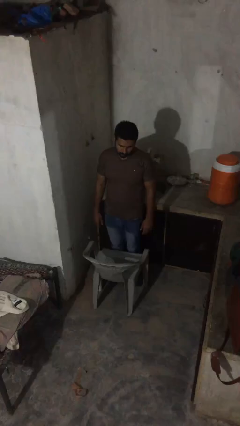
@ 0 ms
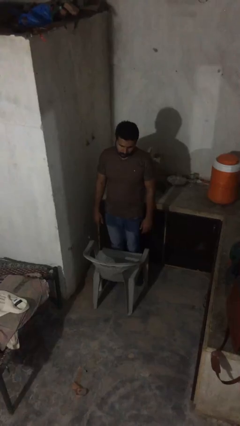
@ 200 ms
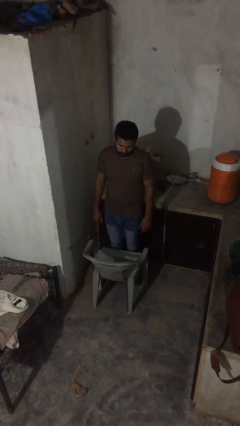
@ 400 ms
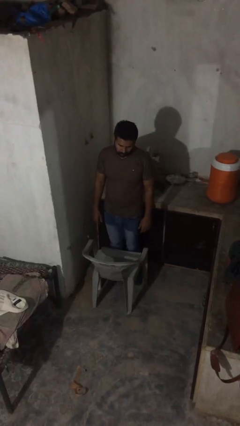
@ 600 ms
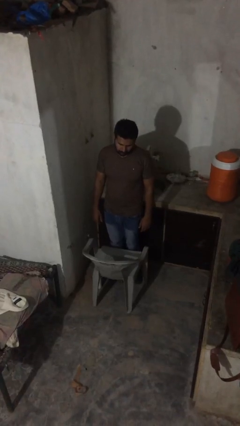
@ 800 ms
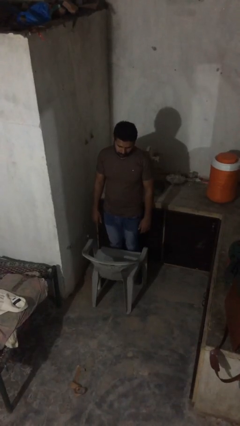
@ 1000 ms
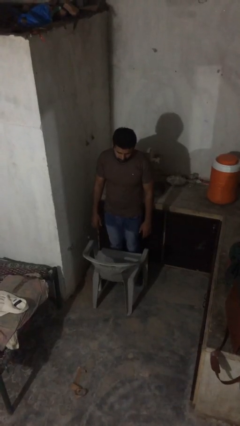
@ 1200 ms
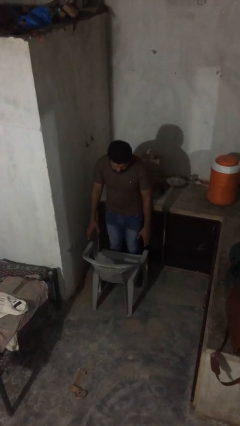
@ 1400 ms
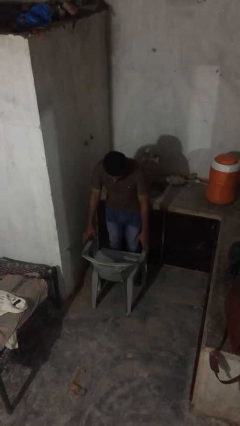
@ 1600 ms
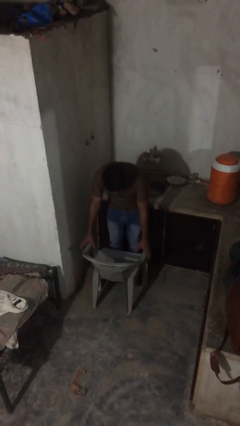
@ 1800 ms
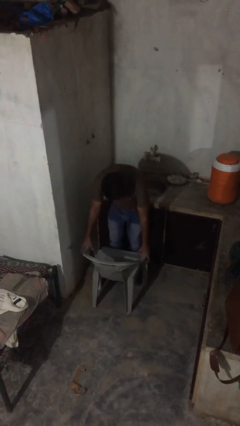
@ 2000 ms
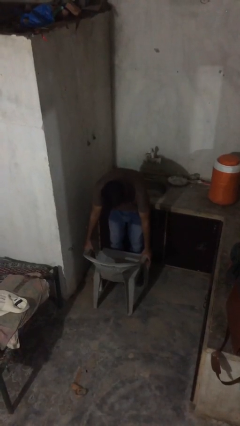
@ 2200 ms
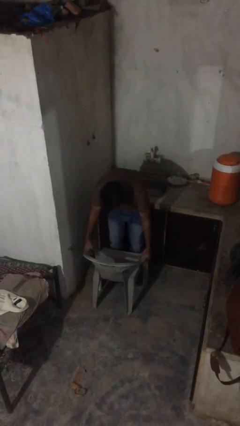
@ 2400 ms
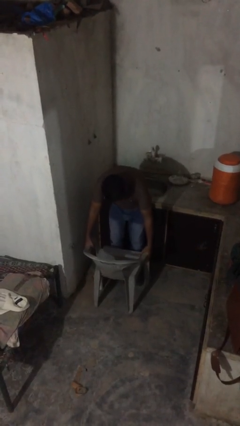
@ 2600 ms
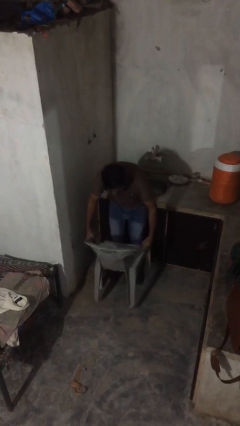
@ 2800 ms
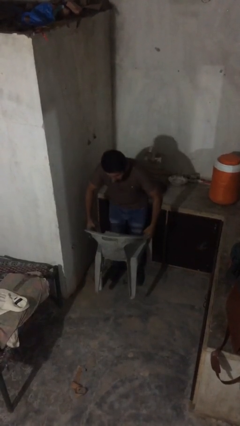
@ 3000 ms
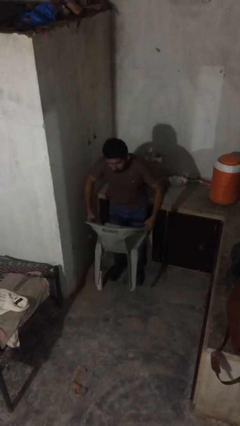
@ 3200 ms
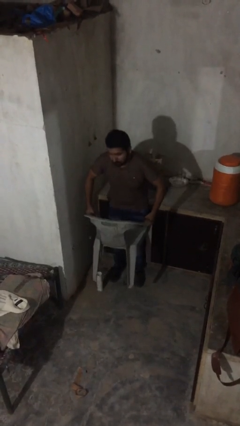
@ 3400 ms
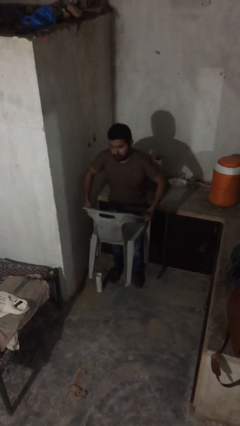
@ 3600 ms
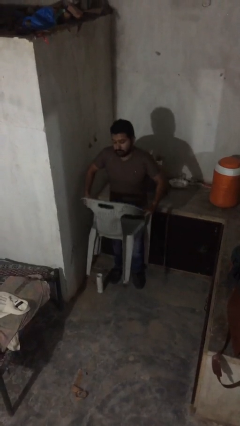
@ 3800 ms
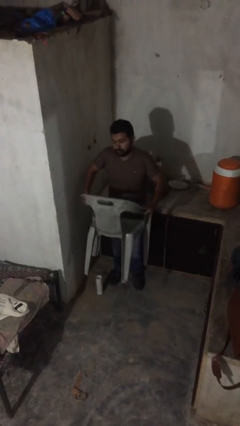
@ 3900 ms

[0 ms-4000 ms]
person picks up object from floor

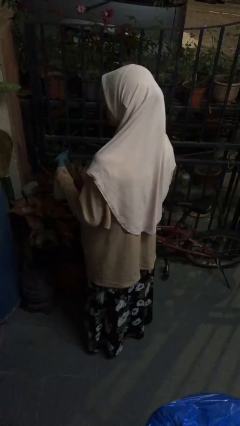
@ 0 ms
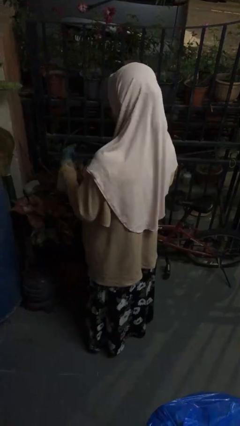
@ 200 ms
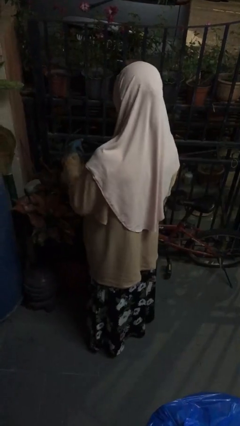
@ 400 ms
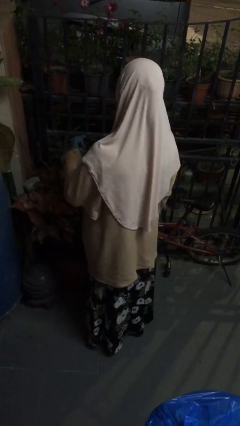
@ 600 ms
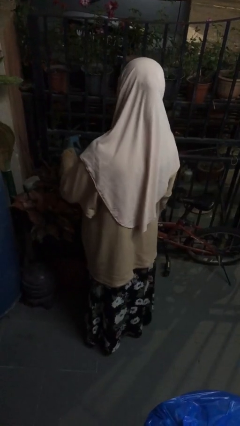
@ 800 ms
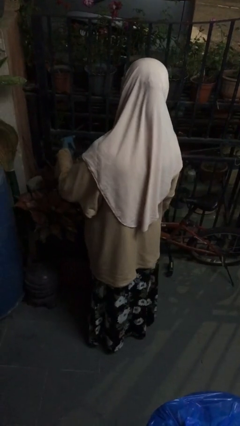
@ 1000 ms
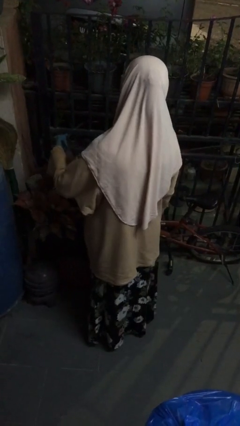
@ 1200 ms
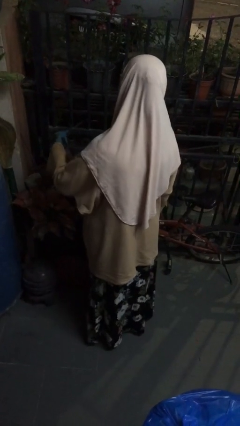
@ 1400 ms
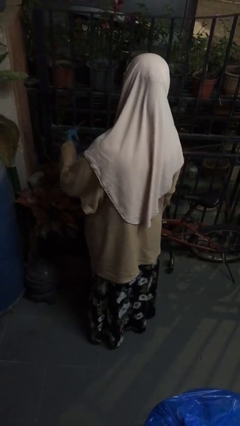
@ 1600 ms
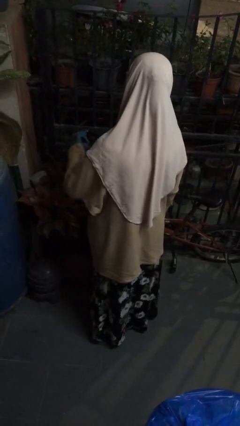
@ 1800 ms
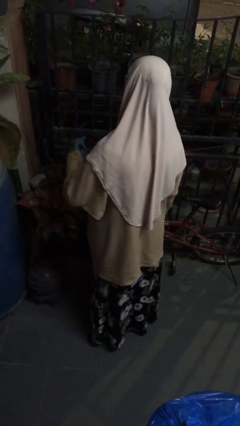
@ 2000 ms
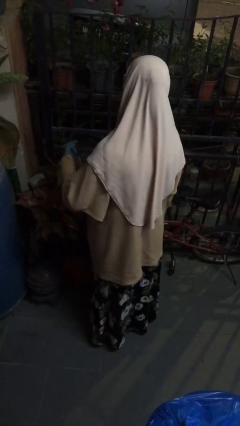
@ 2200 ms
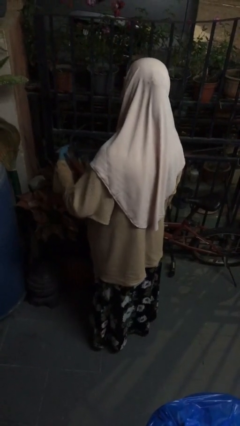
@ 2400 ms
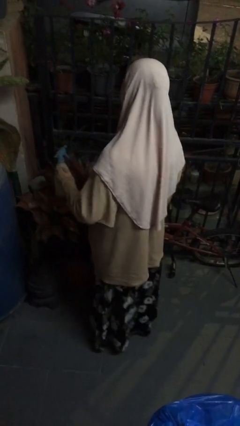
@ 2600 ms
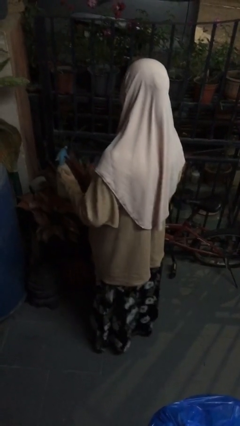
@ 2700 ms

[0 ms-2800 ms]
person waters houseplant

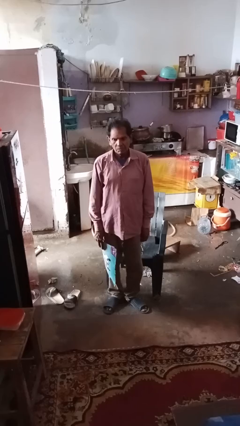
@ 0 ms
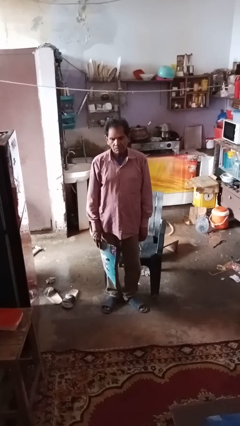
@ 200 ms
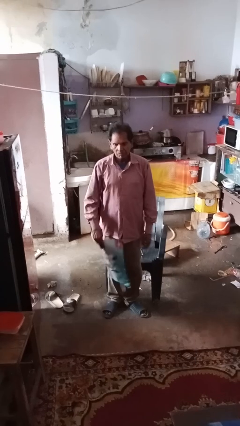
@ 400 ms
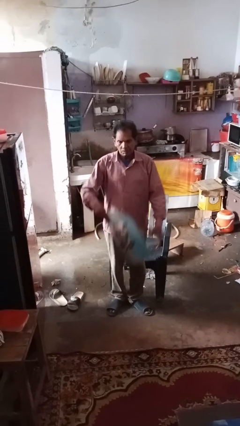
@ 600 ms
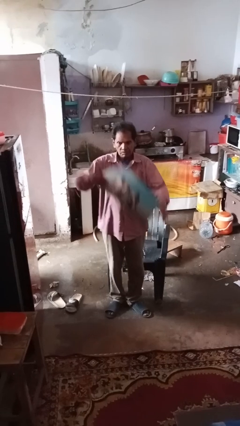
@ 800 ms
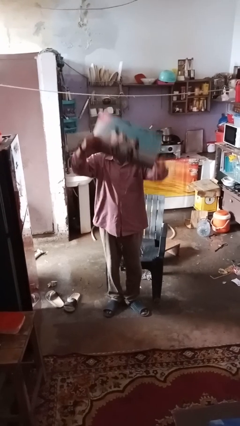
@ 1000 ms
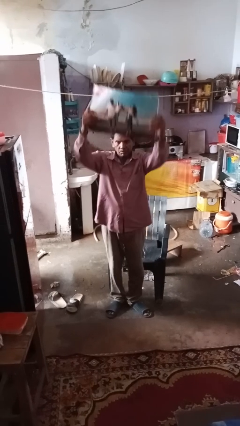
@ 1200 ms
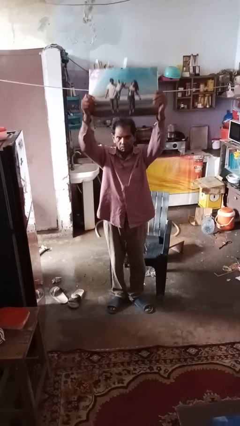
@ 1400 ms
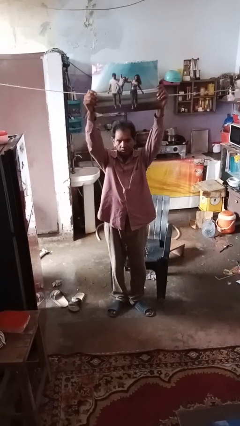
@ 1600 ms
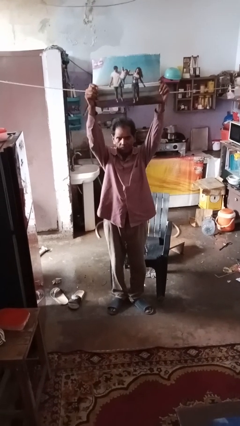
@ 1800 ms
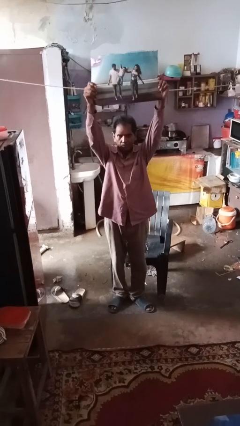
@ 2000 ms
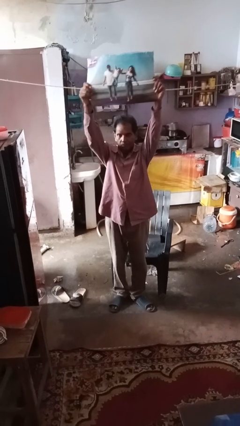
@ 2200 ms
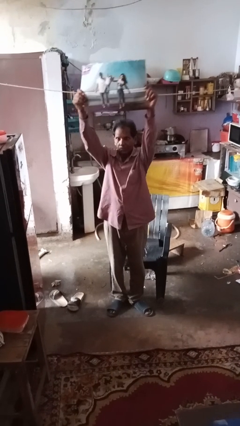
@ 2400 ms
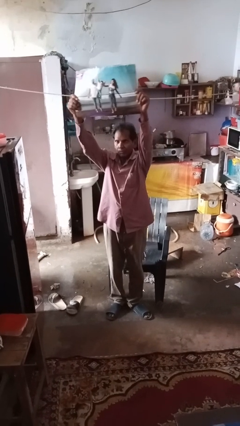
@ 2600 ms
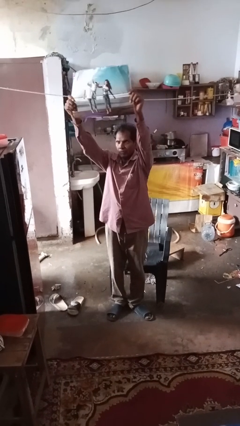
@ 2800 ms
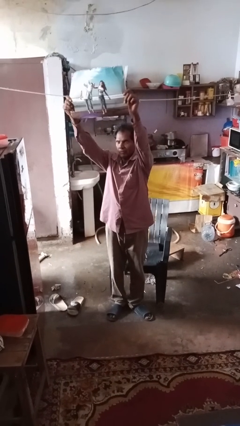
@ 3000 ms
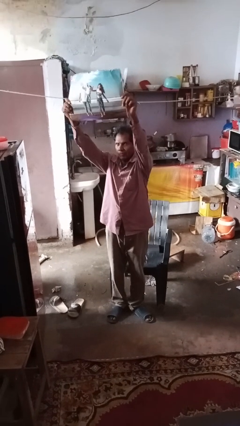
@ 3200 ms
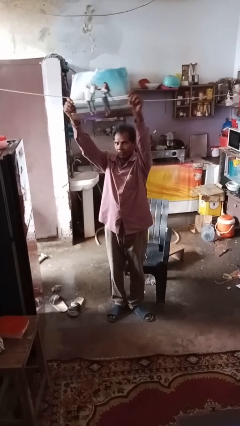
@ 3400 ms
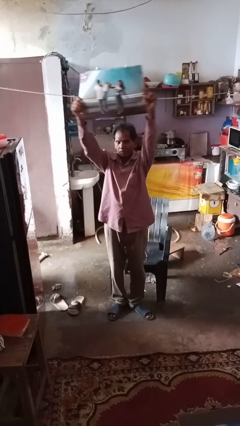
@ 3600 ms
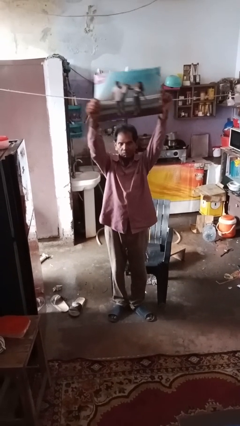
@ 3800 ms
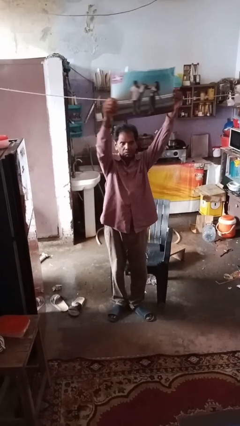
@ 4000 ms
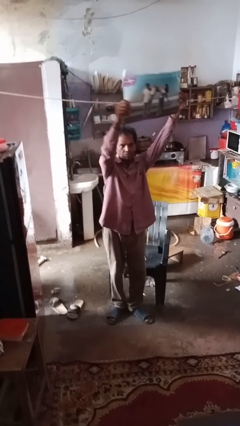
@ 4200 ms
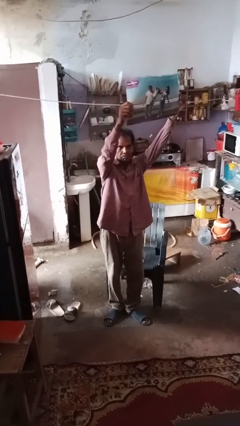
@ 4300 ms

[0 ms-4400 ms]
person holds object above head

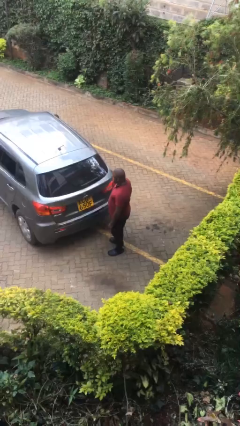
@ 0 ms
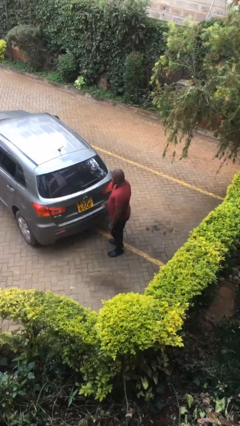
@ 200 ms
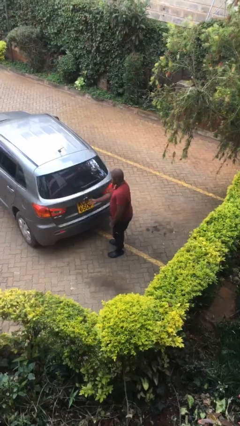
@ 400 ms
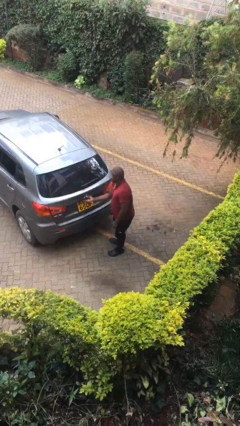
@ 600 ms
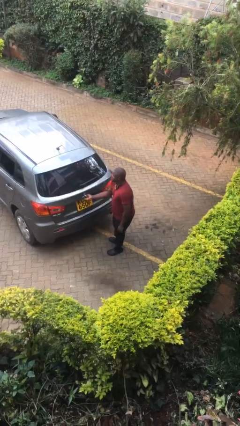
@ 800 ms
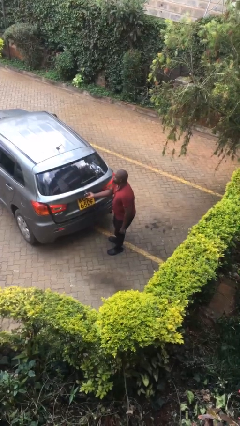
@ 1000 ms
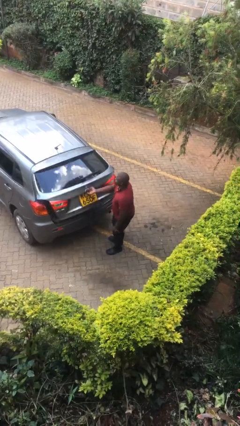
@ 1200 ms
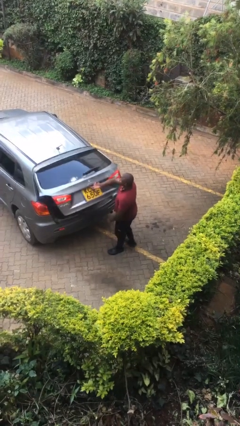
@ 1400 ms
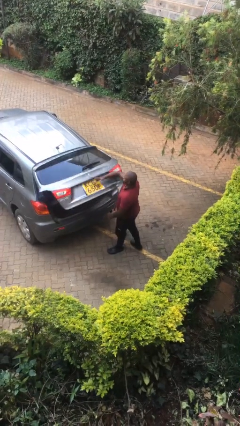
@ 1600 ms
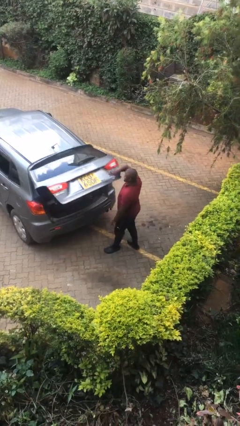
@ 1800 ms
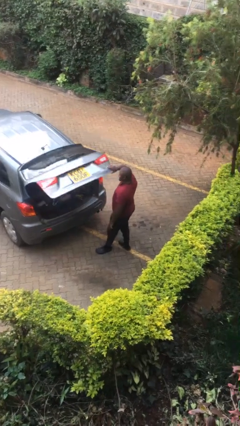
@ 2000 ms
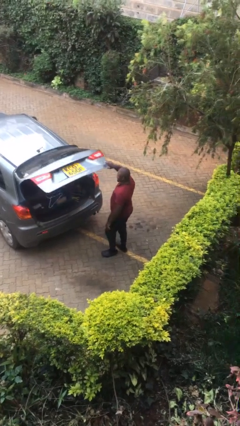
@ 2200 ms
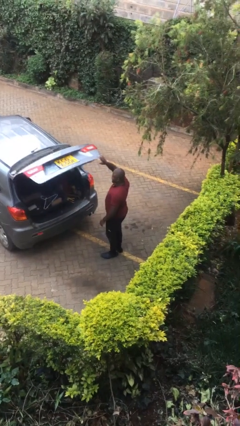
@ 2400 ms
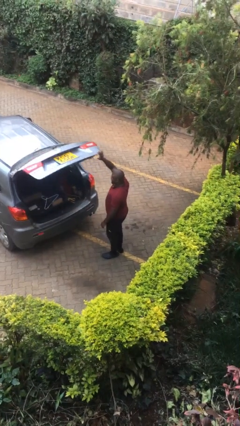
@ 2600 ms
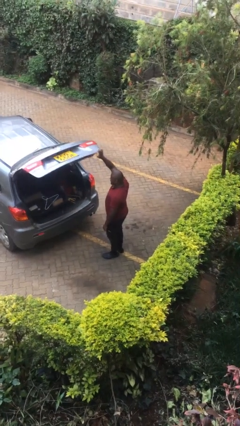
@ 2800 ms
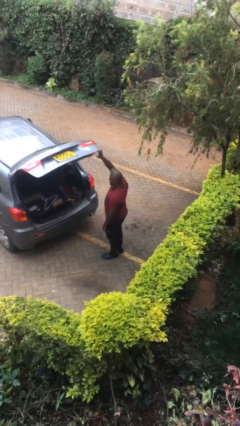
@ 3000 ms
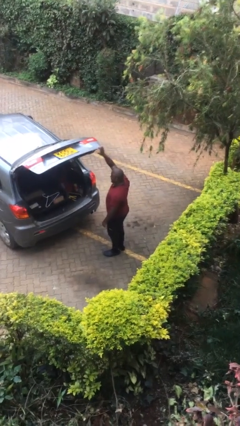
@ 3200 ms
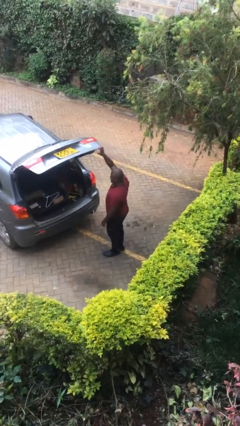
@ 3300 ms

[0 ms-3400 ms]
person opens car trunk

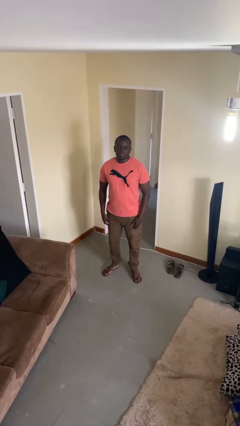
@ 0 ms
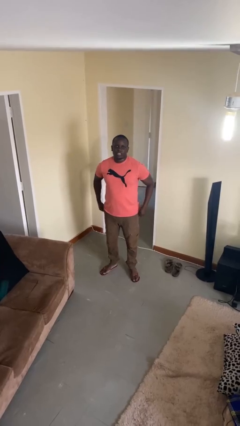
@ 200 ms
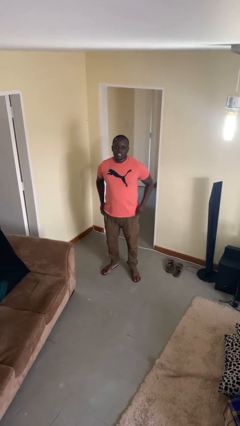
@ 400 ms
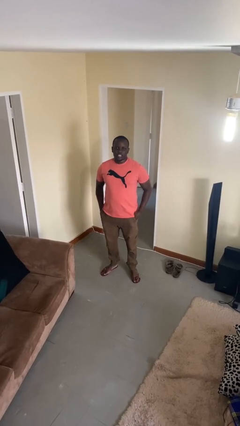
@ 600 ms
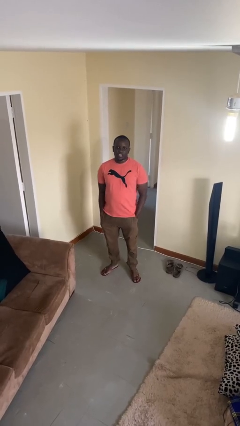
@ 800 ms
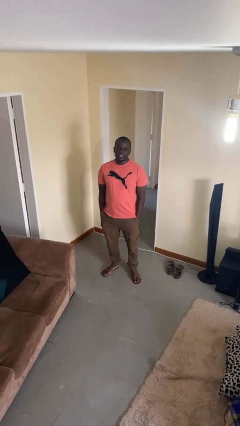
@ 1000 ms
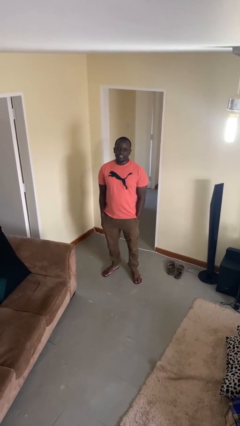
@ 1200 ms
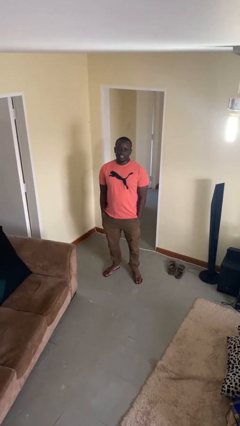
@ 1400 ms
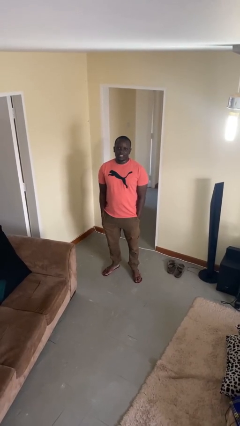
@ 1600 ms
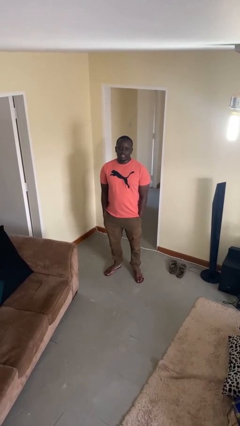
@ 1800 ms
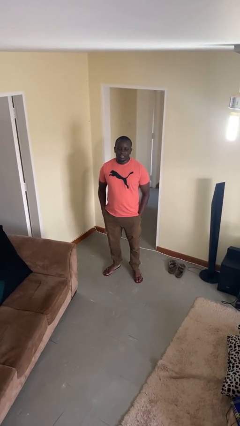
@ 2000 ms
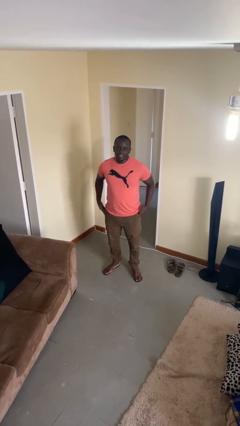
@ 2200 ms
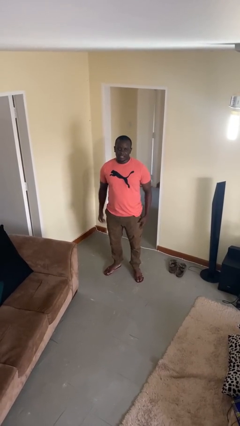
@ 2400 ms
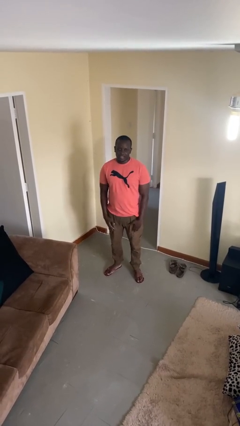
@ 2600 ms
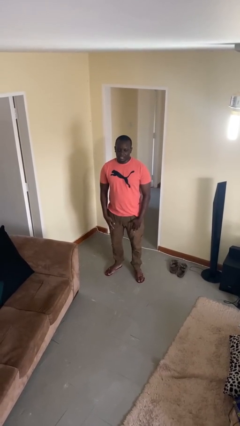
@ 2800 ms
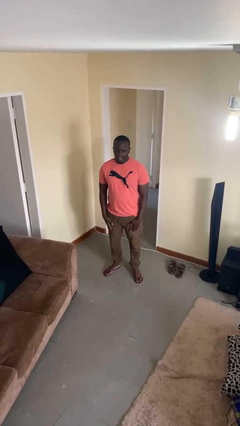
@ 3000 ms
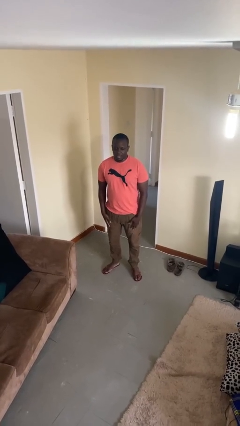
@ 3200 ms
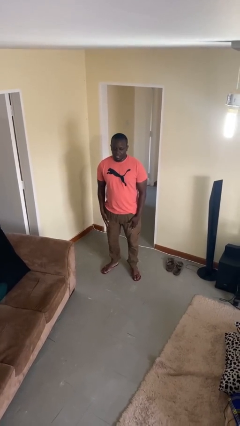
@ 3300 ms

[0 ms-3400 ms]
person puts hands in back pockets
